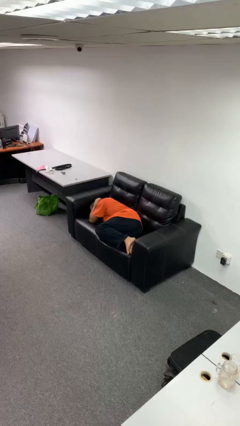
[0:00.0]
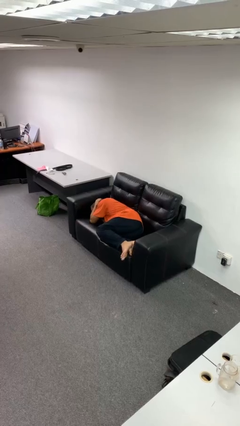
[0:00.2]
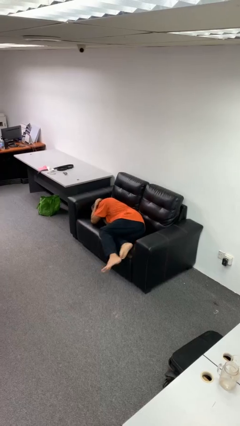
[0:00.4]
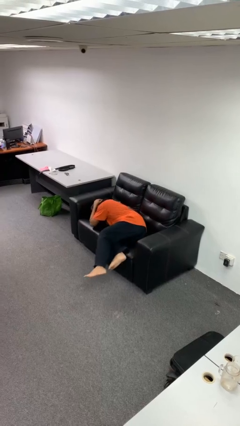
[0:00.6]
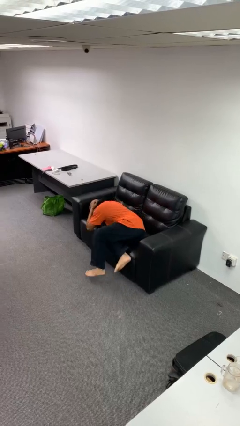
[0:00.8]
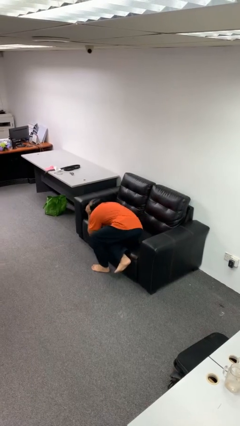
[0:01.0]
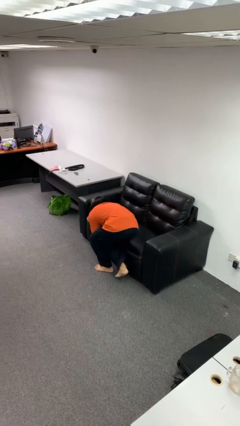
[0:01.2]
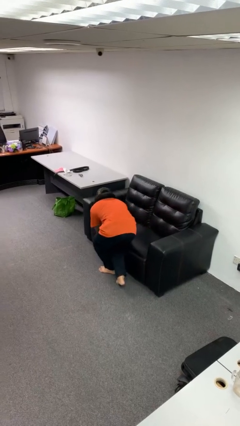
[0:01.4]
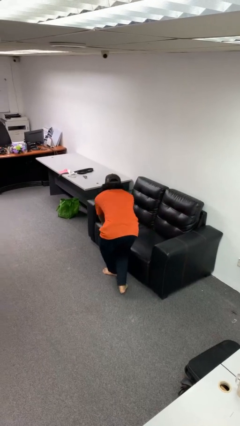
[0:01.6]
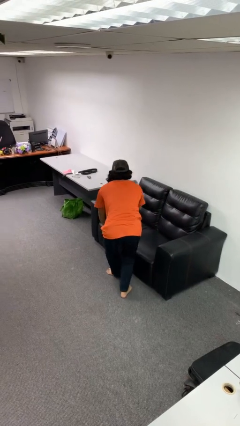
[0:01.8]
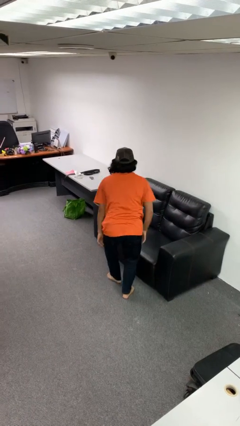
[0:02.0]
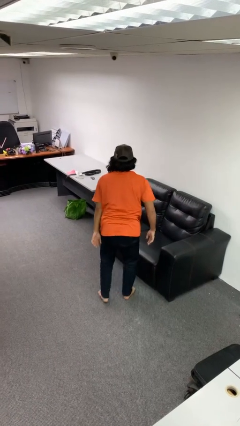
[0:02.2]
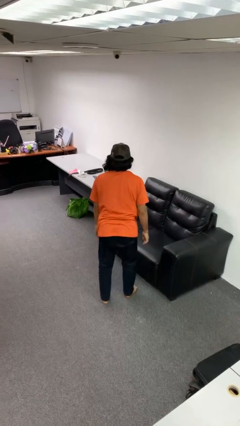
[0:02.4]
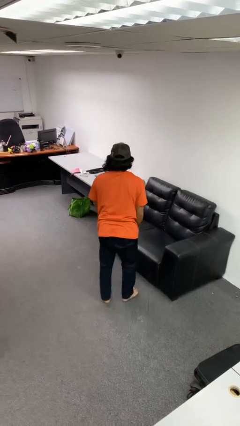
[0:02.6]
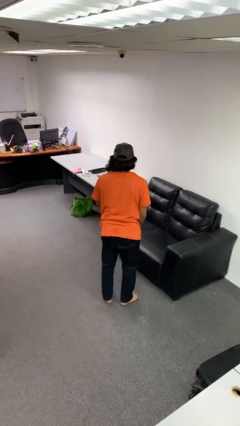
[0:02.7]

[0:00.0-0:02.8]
person stands up

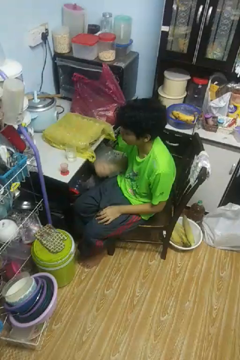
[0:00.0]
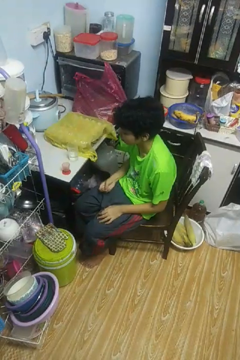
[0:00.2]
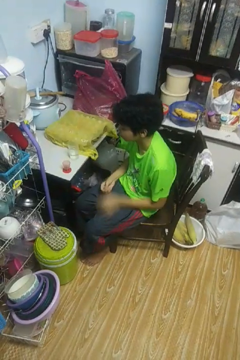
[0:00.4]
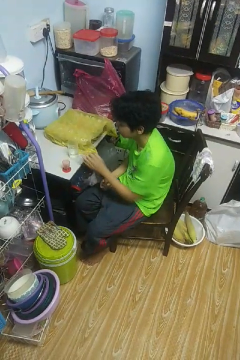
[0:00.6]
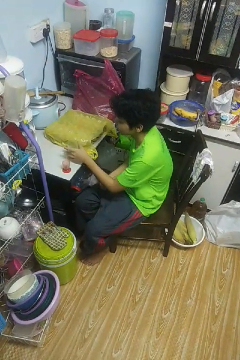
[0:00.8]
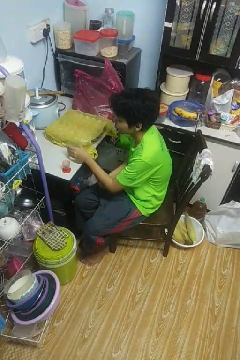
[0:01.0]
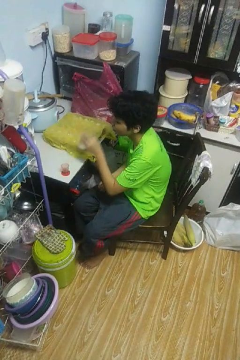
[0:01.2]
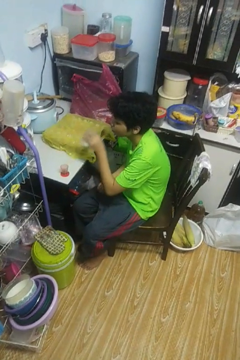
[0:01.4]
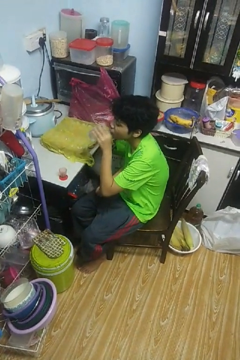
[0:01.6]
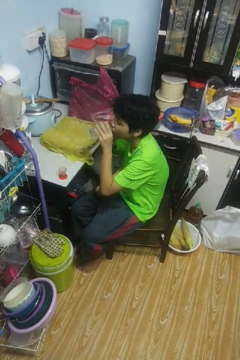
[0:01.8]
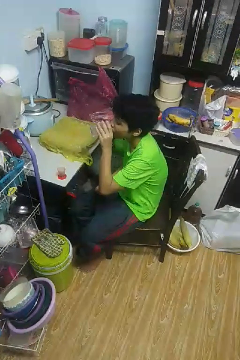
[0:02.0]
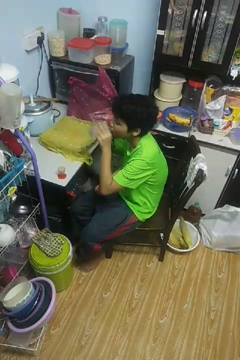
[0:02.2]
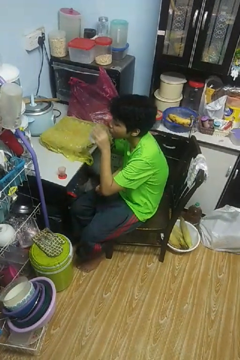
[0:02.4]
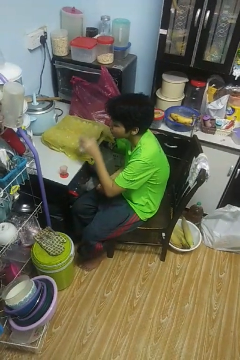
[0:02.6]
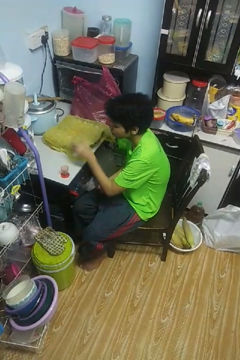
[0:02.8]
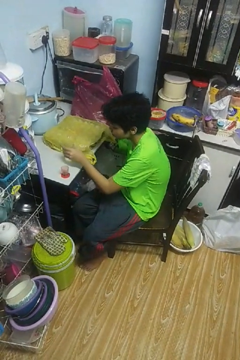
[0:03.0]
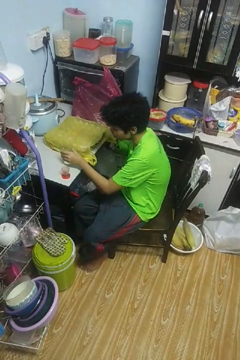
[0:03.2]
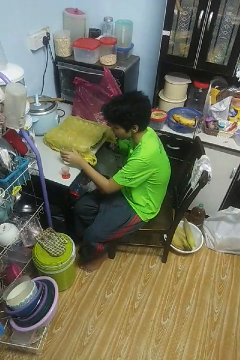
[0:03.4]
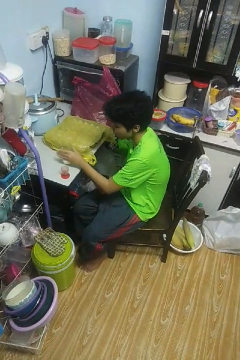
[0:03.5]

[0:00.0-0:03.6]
person drinks from cup

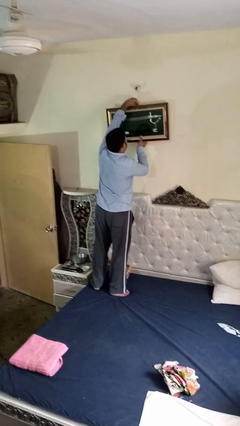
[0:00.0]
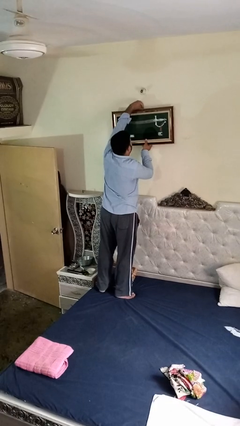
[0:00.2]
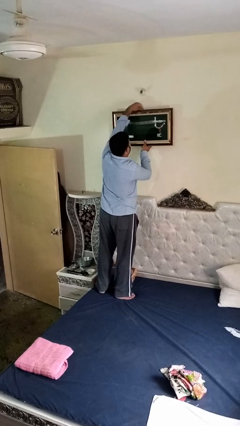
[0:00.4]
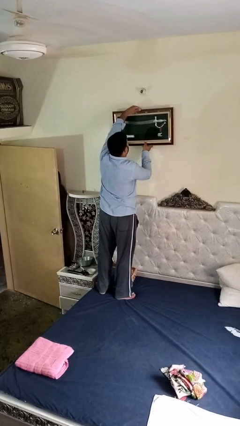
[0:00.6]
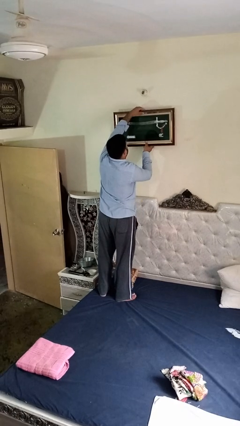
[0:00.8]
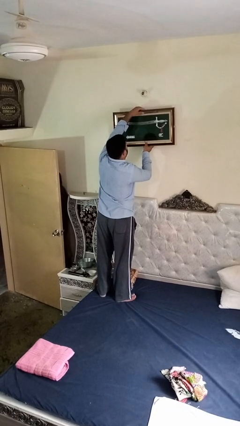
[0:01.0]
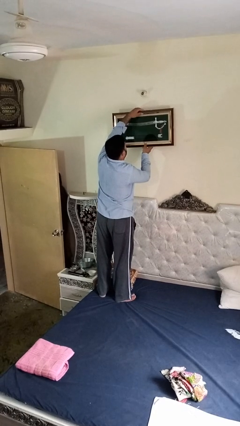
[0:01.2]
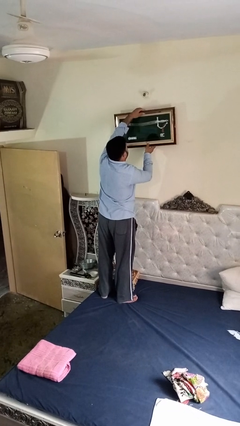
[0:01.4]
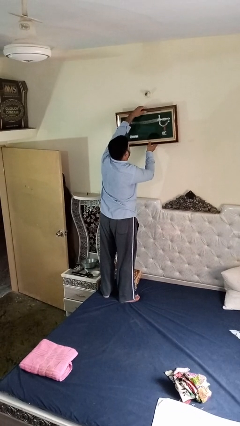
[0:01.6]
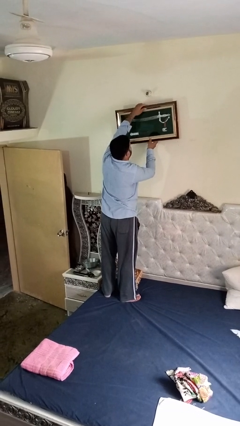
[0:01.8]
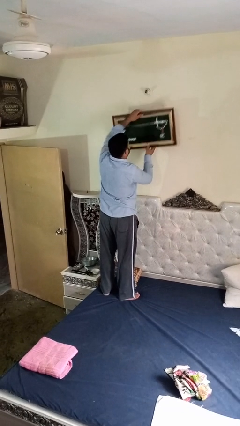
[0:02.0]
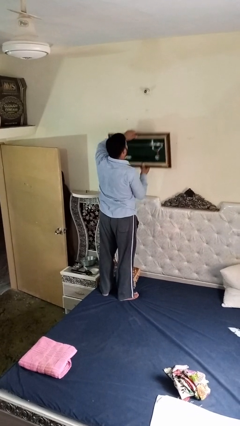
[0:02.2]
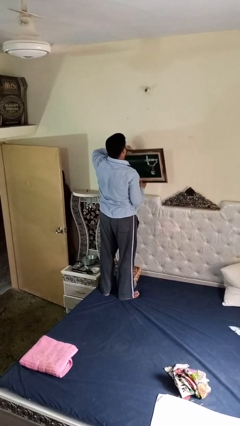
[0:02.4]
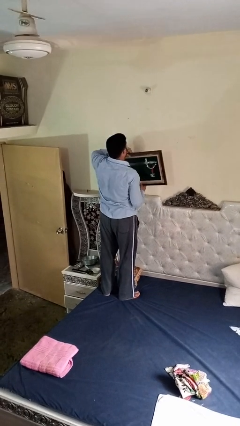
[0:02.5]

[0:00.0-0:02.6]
person takes down picture frame

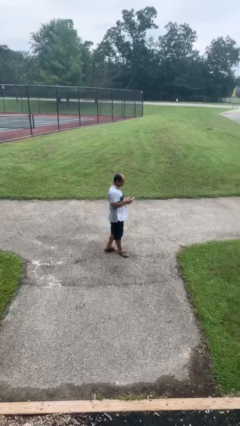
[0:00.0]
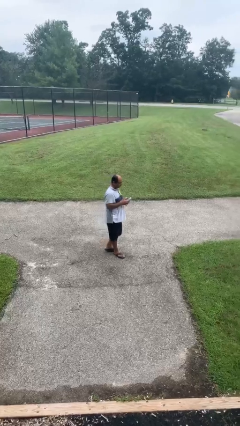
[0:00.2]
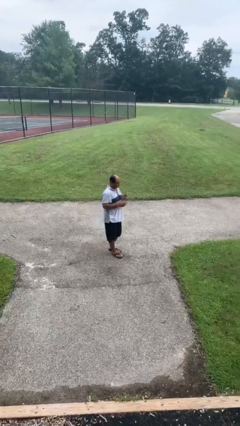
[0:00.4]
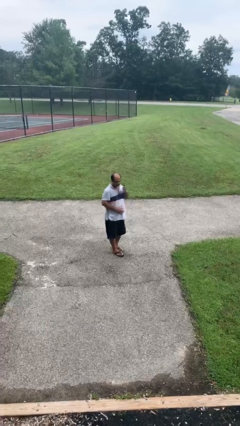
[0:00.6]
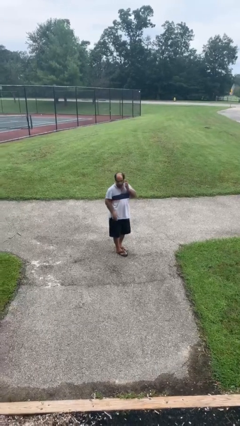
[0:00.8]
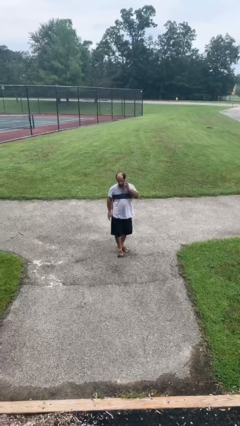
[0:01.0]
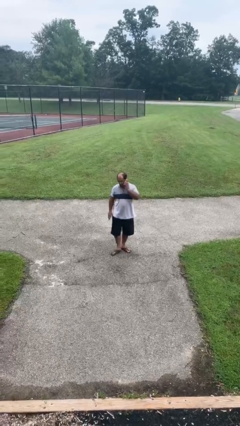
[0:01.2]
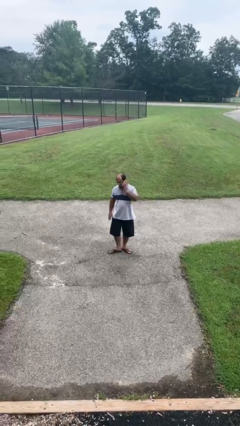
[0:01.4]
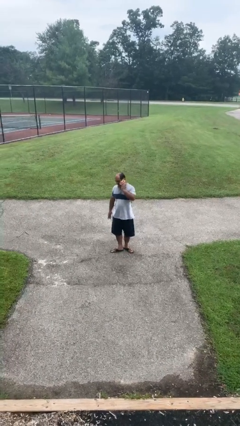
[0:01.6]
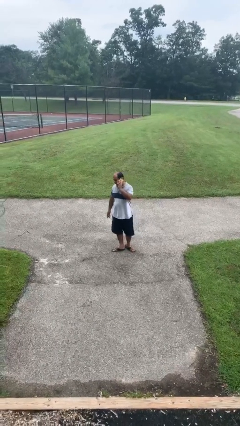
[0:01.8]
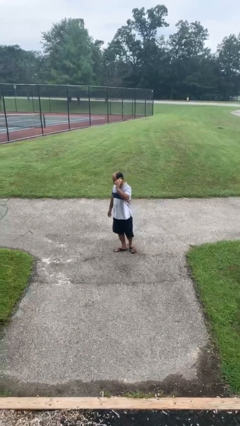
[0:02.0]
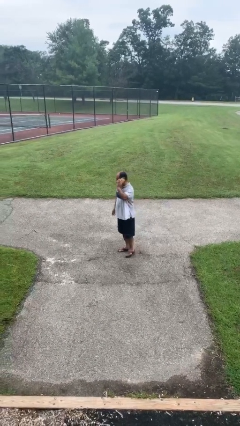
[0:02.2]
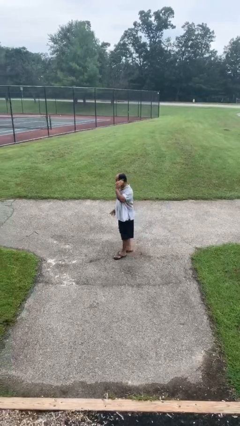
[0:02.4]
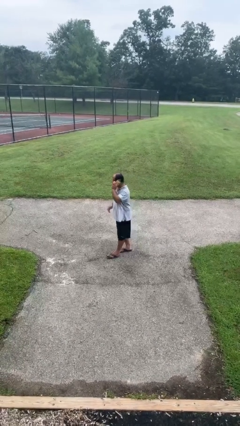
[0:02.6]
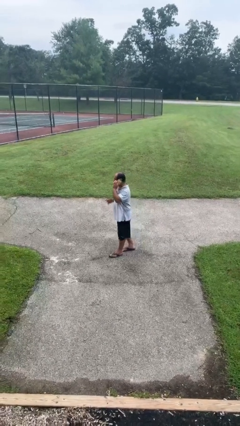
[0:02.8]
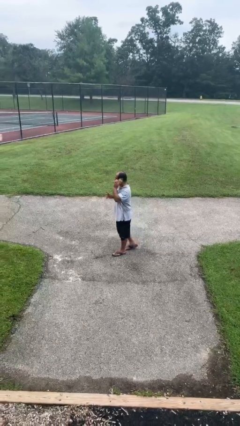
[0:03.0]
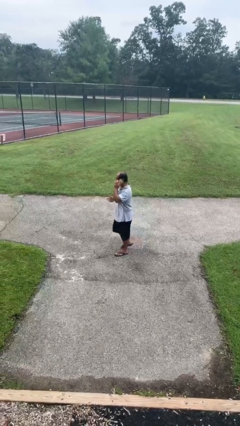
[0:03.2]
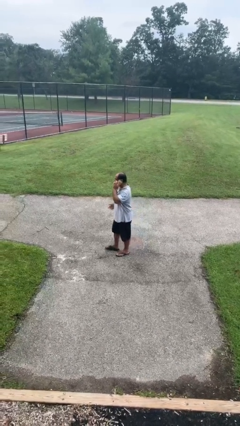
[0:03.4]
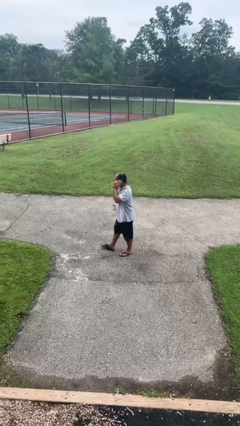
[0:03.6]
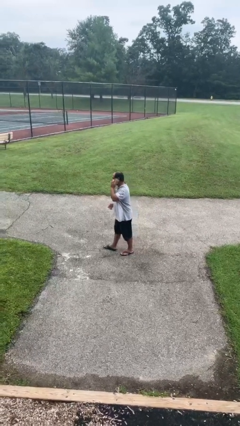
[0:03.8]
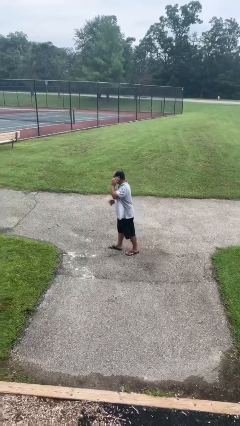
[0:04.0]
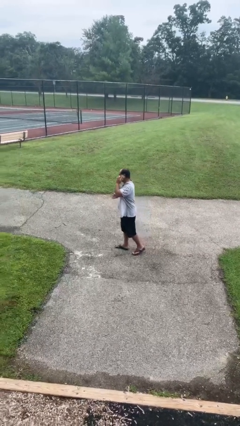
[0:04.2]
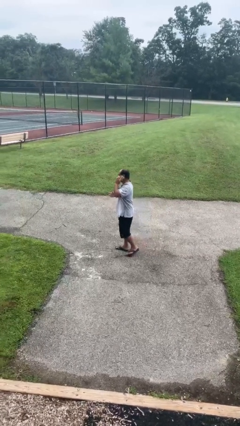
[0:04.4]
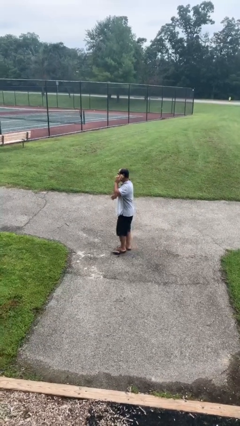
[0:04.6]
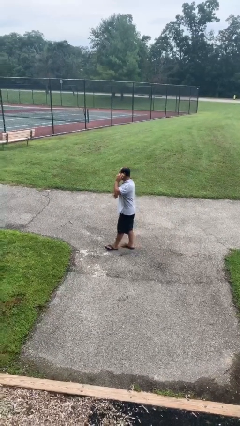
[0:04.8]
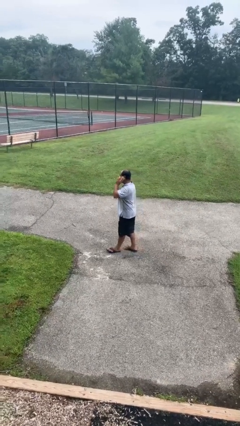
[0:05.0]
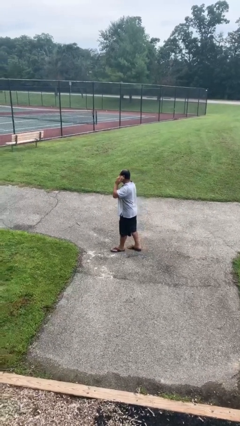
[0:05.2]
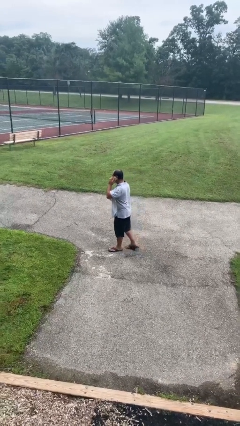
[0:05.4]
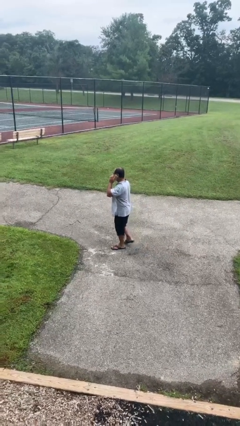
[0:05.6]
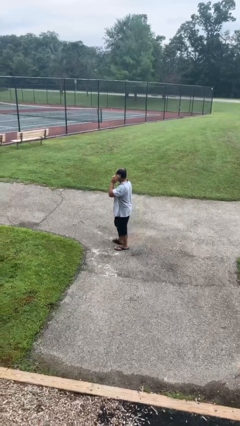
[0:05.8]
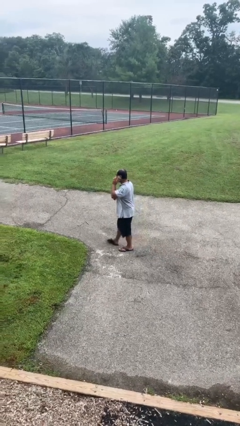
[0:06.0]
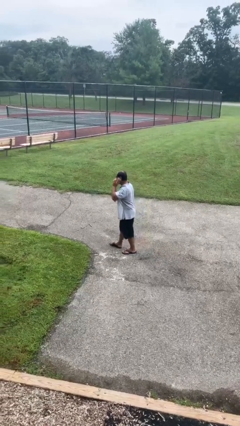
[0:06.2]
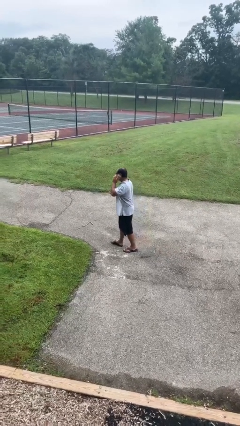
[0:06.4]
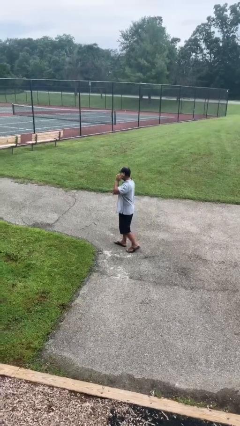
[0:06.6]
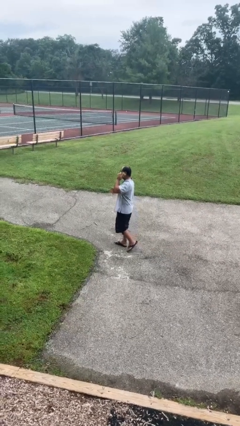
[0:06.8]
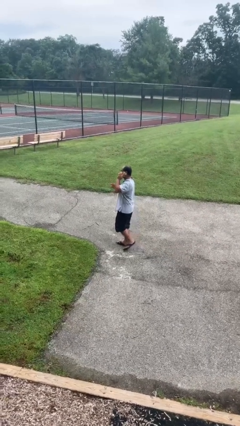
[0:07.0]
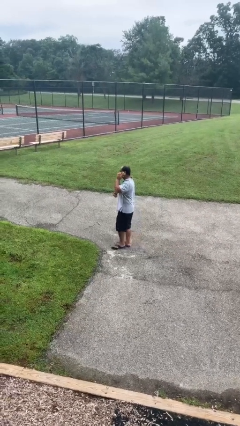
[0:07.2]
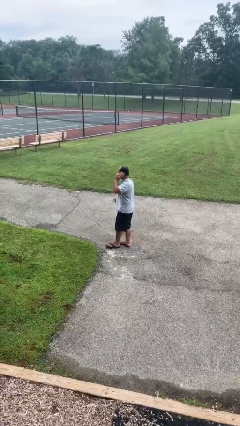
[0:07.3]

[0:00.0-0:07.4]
person talks on phone

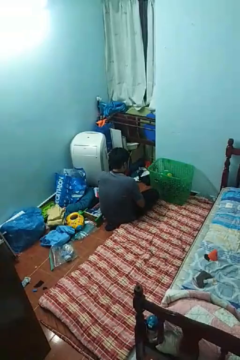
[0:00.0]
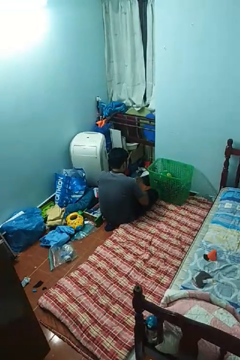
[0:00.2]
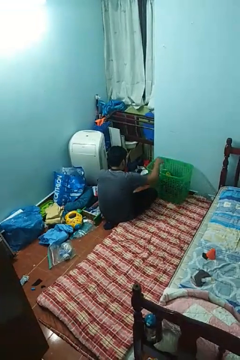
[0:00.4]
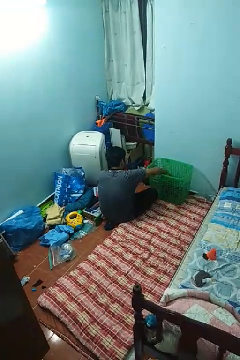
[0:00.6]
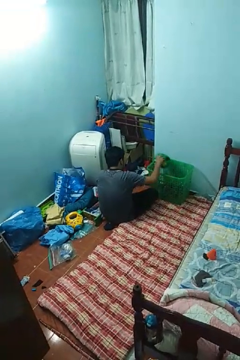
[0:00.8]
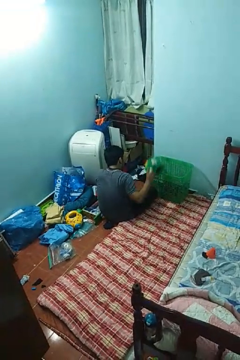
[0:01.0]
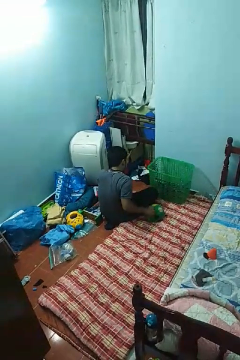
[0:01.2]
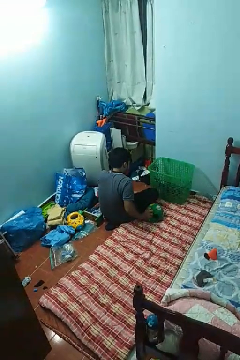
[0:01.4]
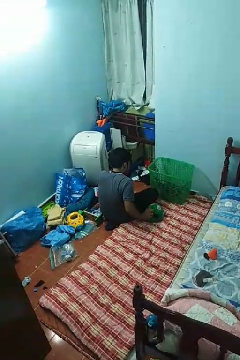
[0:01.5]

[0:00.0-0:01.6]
person takes object from basket

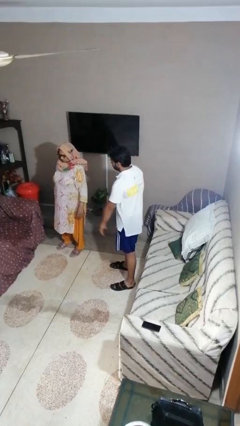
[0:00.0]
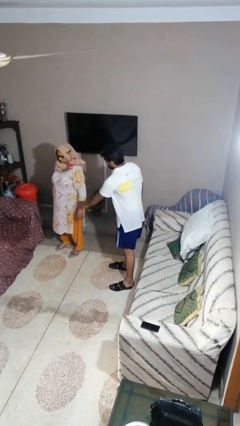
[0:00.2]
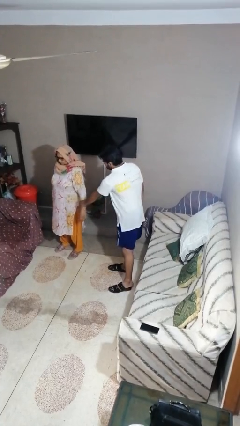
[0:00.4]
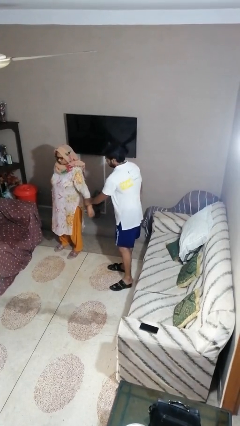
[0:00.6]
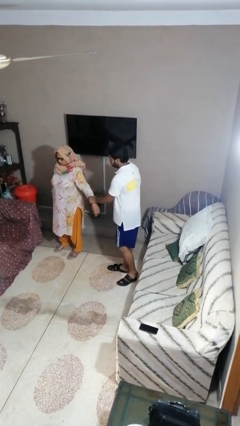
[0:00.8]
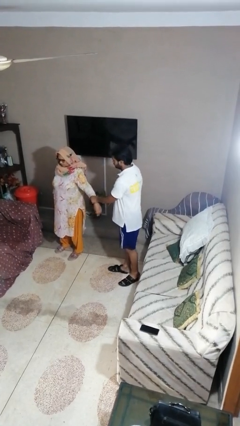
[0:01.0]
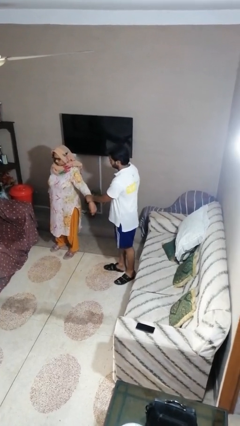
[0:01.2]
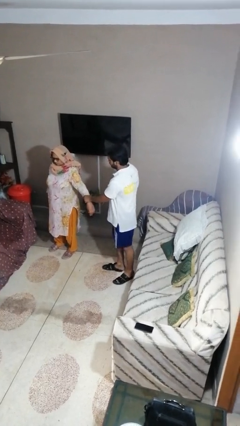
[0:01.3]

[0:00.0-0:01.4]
person grabs person by forearm
